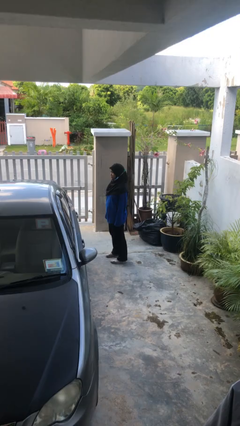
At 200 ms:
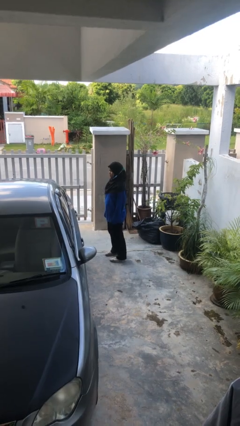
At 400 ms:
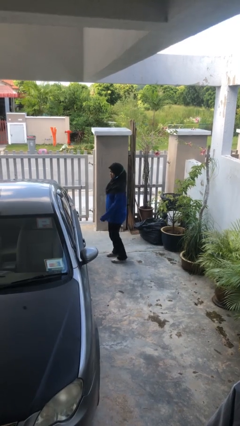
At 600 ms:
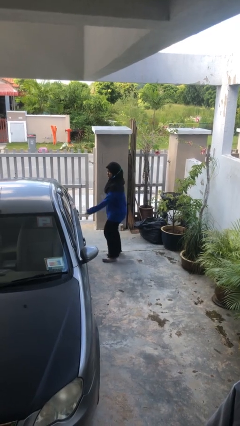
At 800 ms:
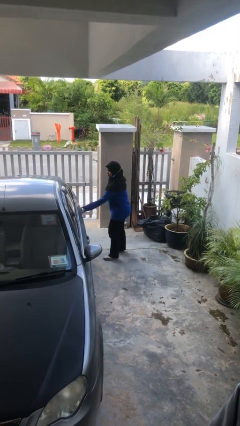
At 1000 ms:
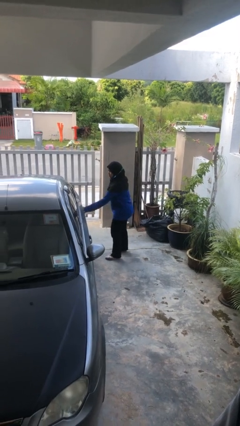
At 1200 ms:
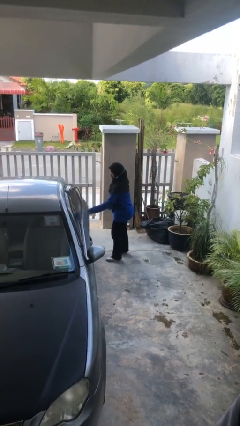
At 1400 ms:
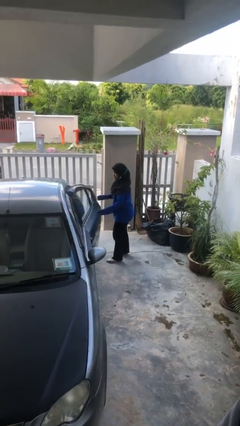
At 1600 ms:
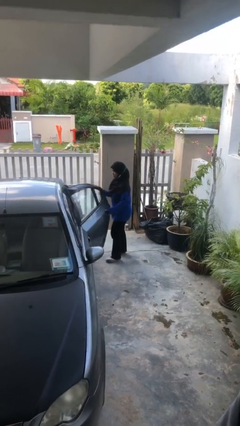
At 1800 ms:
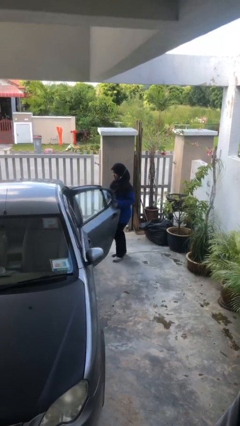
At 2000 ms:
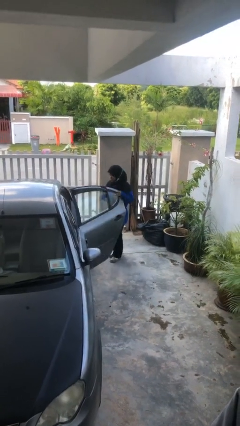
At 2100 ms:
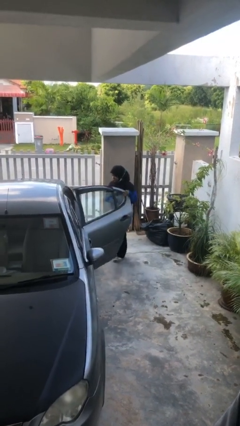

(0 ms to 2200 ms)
person opens car door

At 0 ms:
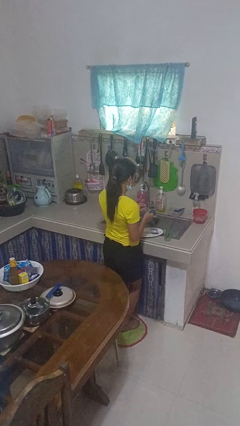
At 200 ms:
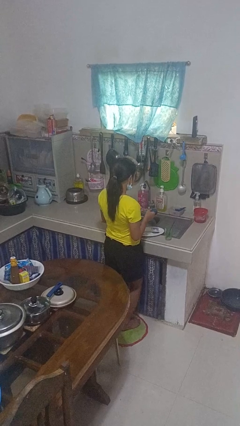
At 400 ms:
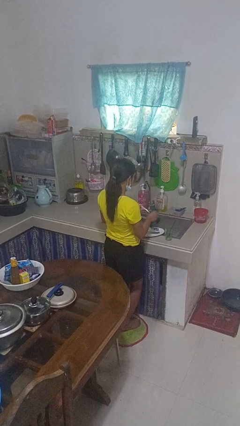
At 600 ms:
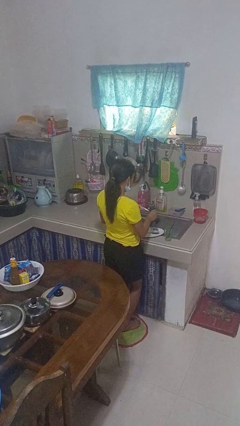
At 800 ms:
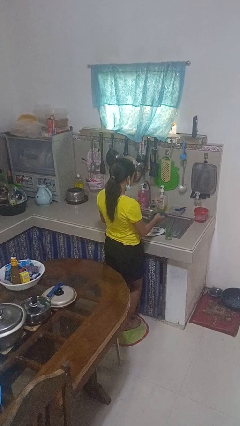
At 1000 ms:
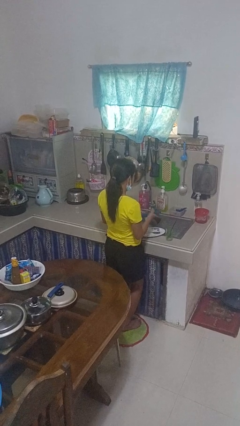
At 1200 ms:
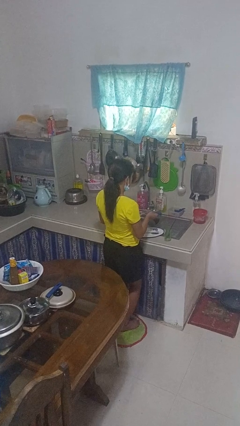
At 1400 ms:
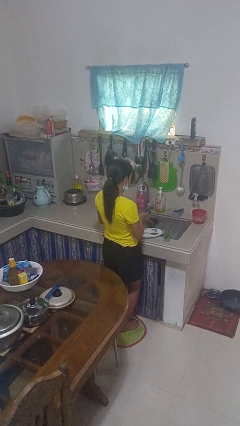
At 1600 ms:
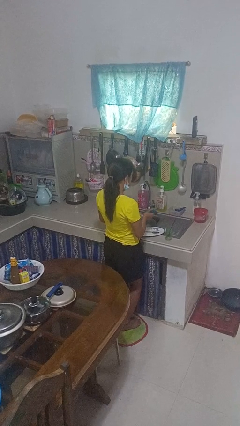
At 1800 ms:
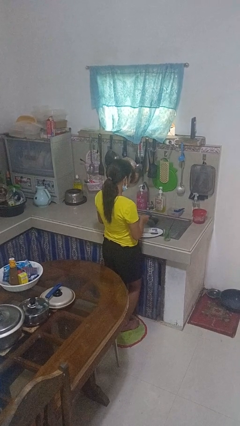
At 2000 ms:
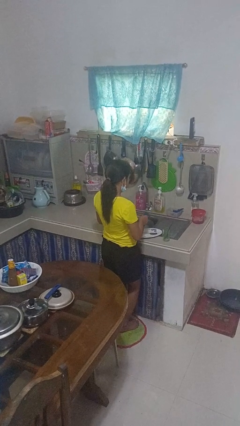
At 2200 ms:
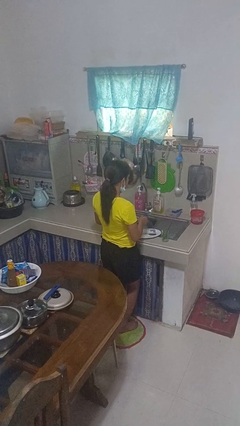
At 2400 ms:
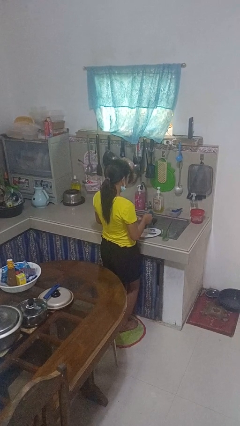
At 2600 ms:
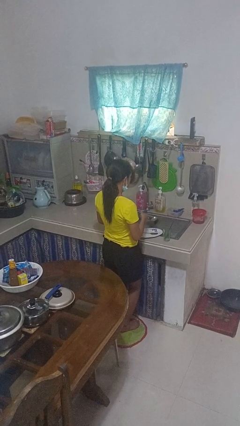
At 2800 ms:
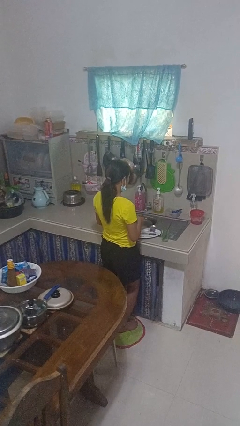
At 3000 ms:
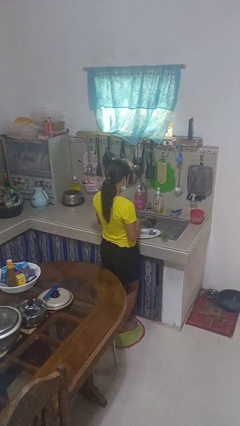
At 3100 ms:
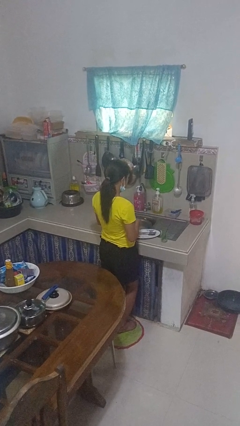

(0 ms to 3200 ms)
person dries dish

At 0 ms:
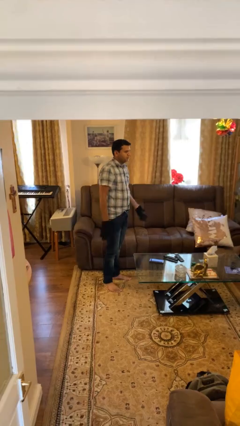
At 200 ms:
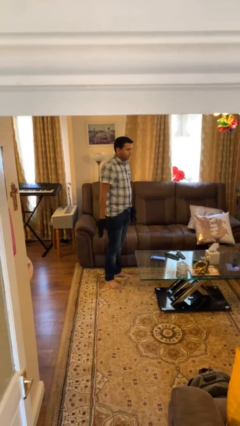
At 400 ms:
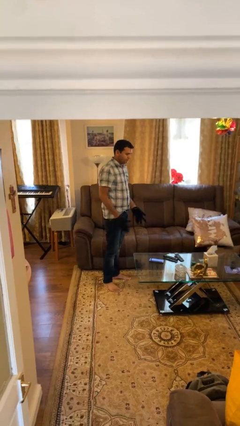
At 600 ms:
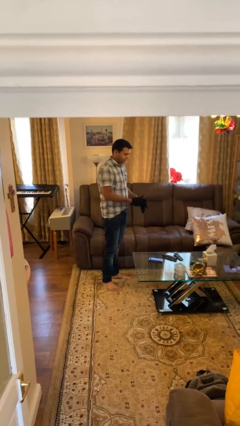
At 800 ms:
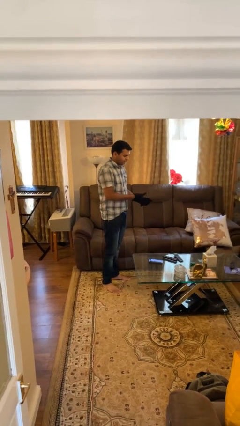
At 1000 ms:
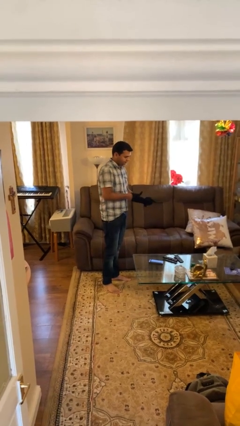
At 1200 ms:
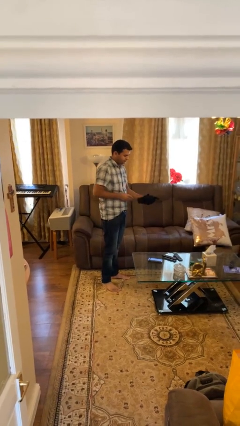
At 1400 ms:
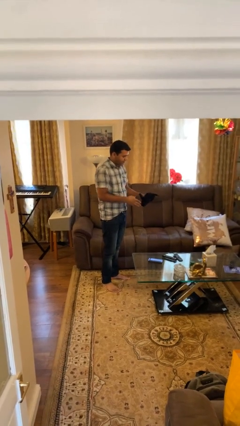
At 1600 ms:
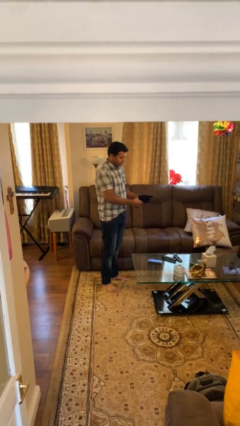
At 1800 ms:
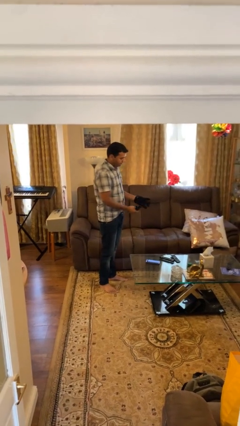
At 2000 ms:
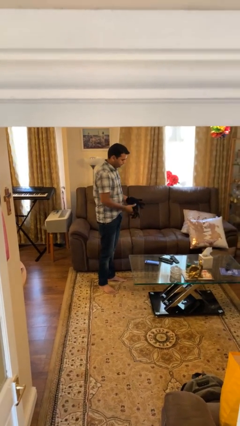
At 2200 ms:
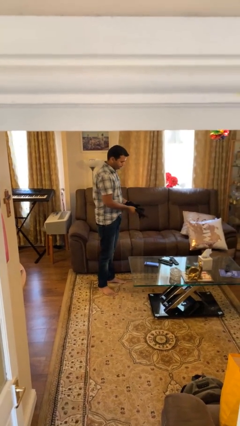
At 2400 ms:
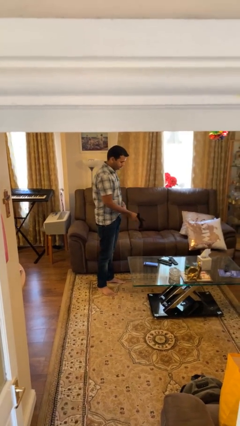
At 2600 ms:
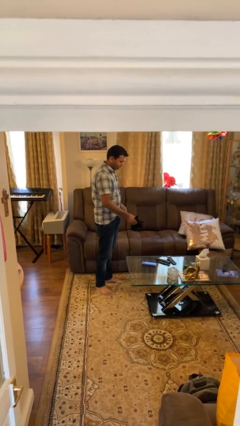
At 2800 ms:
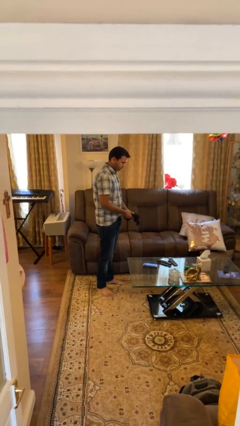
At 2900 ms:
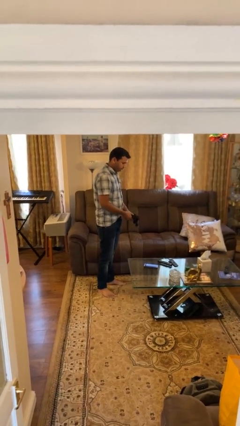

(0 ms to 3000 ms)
person takes off gloves

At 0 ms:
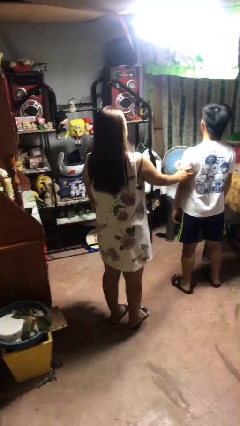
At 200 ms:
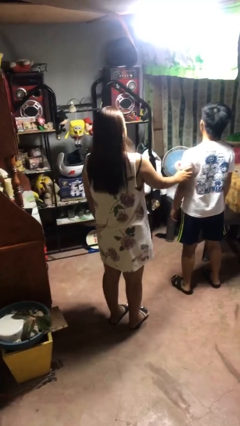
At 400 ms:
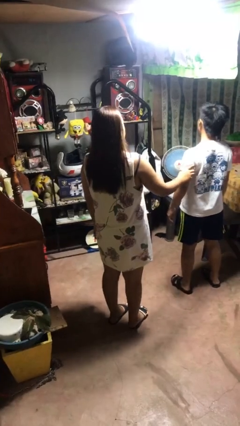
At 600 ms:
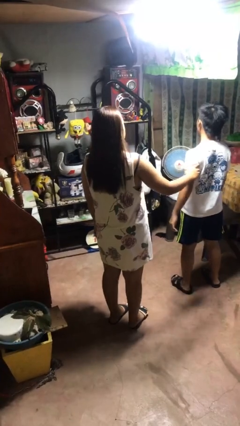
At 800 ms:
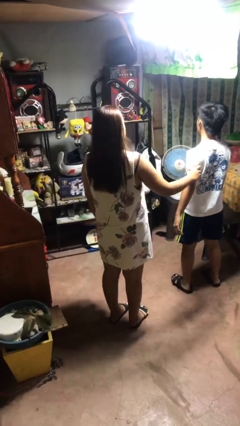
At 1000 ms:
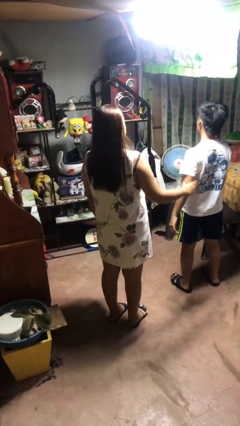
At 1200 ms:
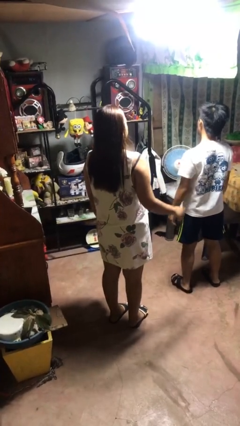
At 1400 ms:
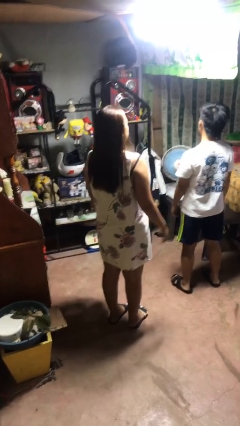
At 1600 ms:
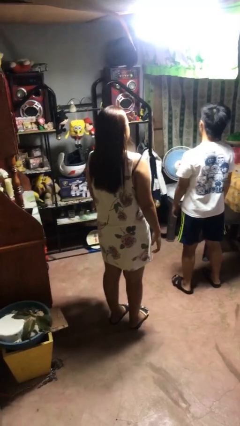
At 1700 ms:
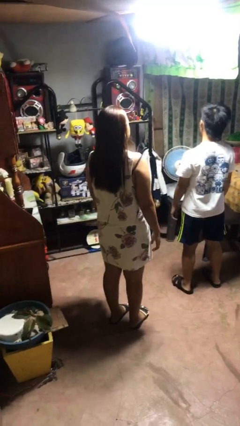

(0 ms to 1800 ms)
person grabs person by bicep

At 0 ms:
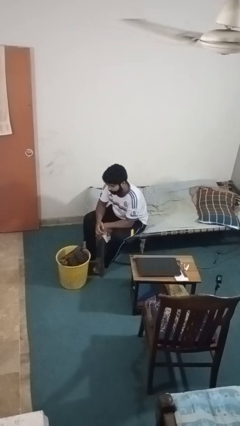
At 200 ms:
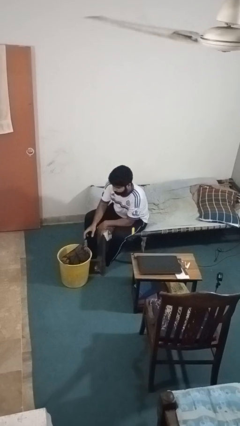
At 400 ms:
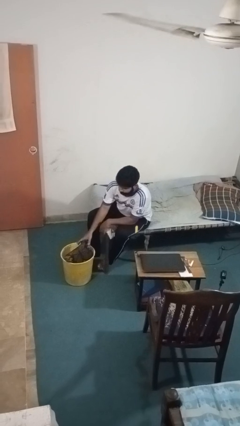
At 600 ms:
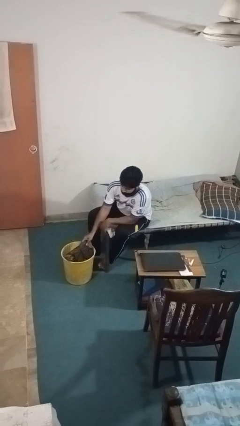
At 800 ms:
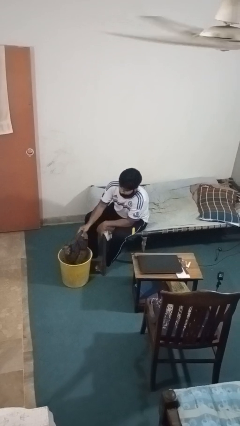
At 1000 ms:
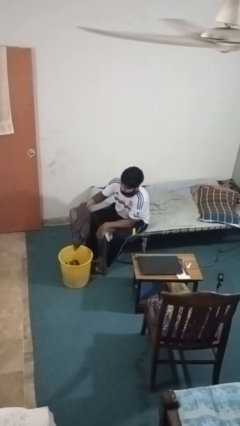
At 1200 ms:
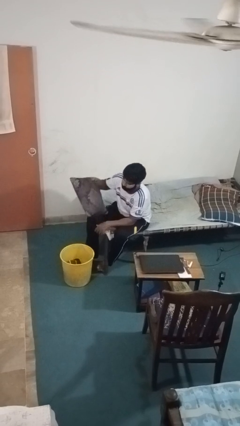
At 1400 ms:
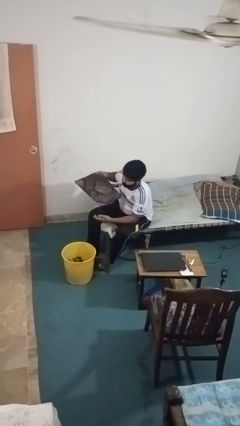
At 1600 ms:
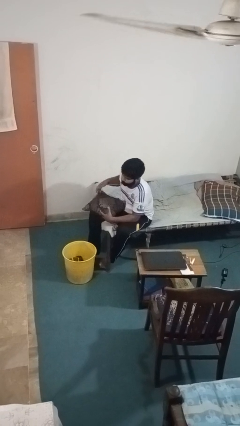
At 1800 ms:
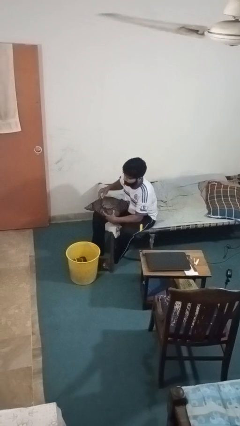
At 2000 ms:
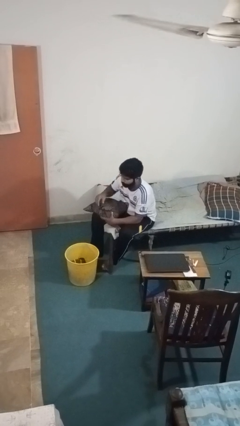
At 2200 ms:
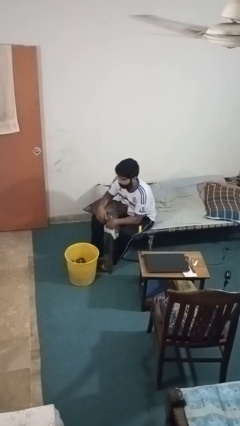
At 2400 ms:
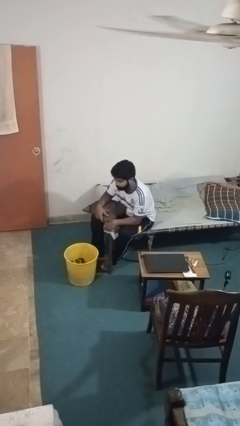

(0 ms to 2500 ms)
person takes object from basket

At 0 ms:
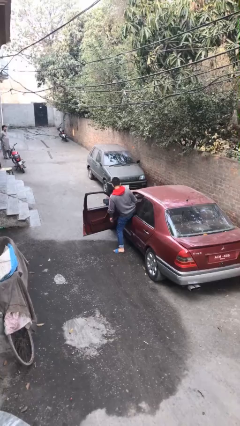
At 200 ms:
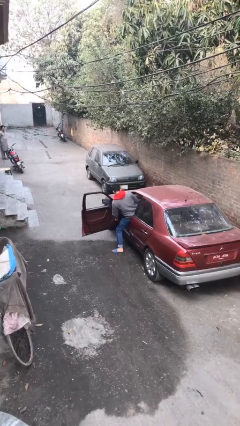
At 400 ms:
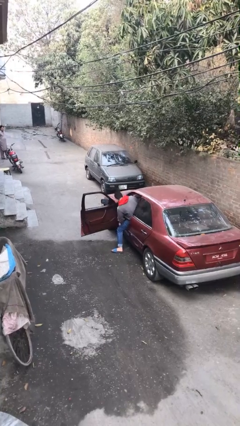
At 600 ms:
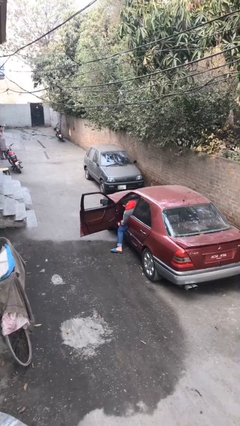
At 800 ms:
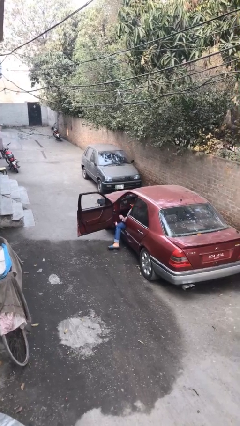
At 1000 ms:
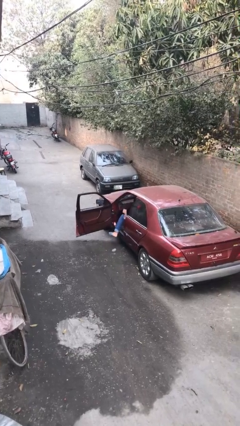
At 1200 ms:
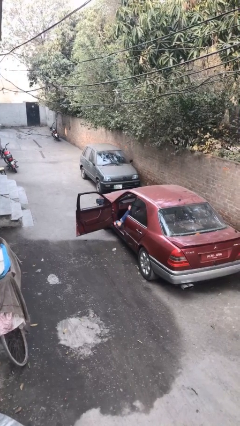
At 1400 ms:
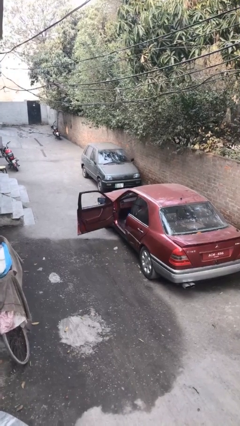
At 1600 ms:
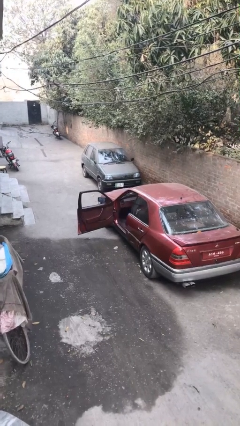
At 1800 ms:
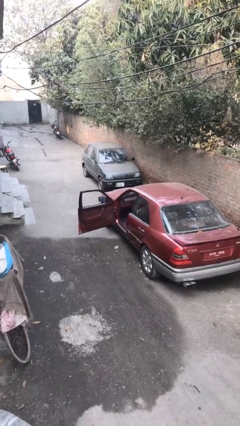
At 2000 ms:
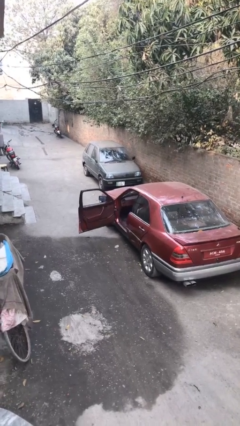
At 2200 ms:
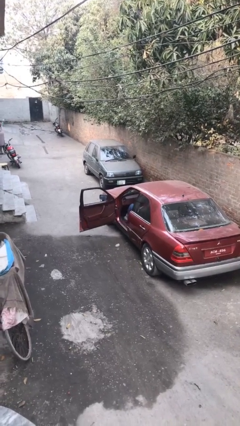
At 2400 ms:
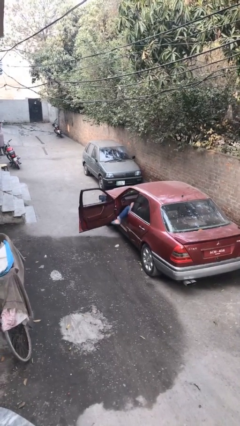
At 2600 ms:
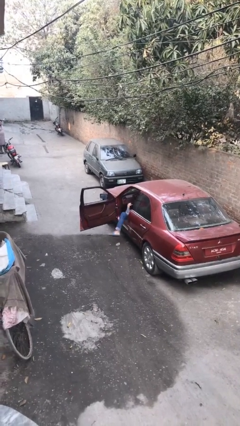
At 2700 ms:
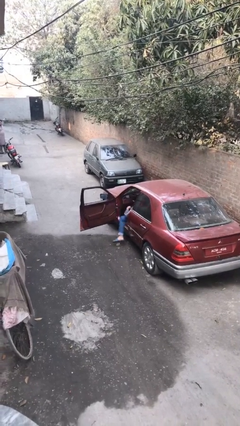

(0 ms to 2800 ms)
person enters car

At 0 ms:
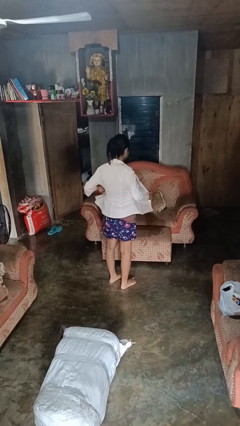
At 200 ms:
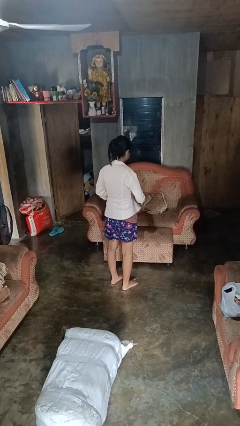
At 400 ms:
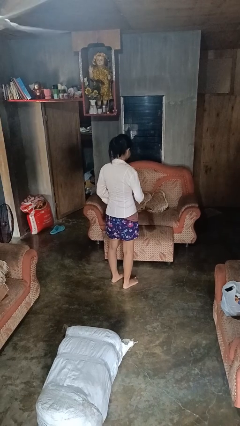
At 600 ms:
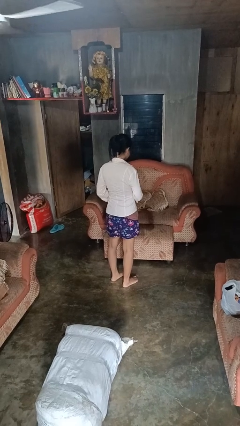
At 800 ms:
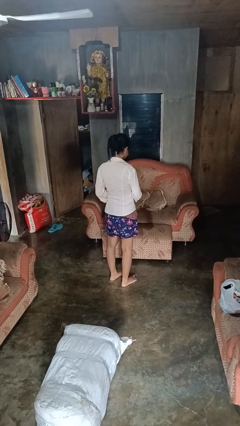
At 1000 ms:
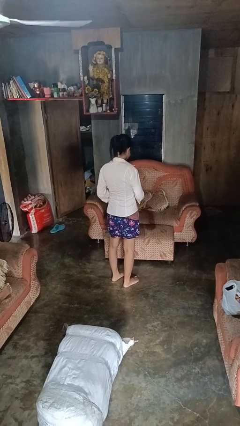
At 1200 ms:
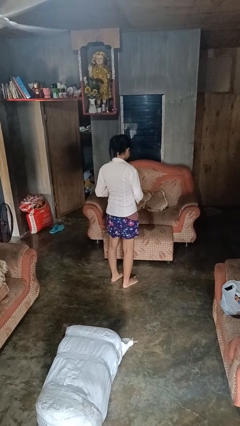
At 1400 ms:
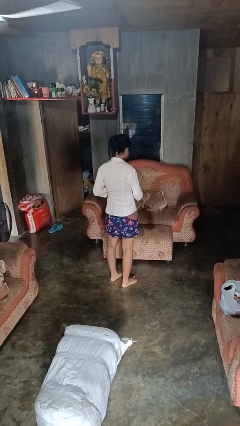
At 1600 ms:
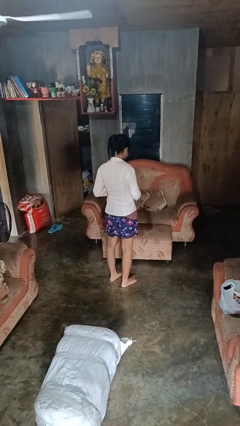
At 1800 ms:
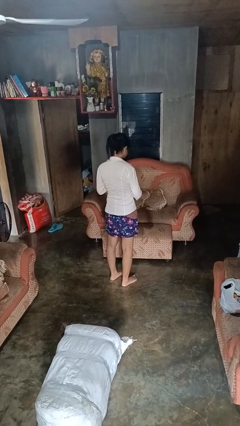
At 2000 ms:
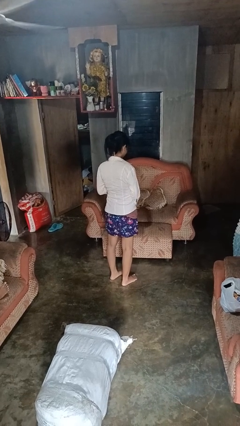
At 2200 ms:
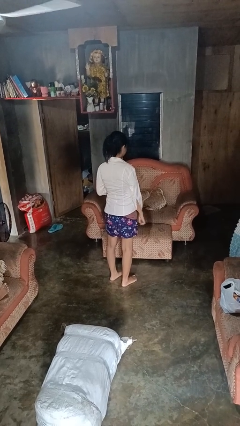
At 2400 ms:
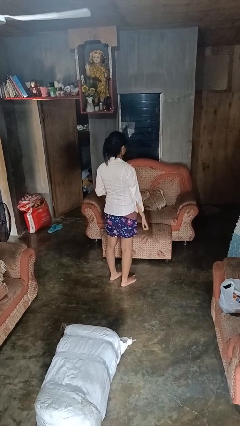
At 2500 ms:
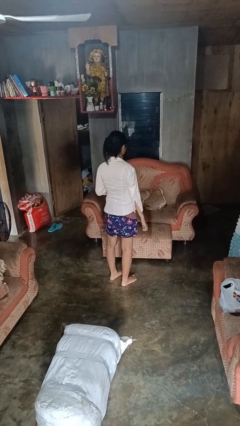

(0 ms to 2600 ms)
person buttons shirt
